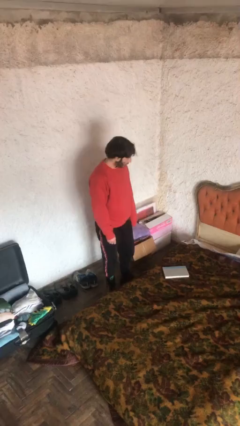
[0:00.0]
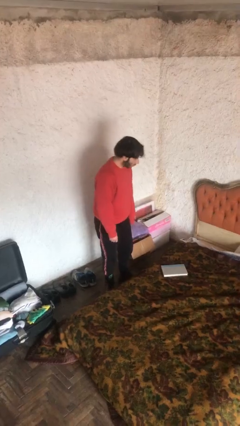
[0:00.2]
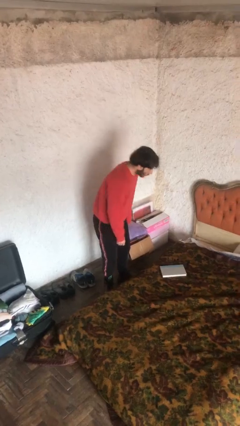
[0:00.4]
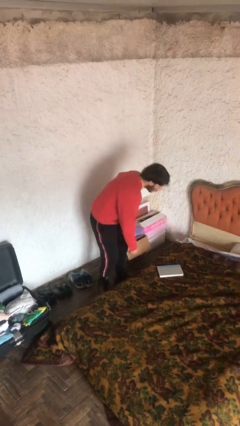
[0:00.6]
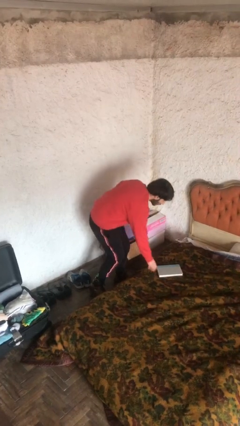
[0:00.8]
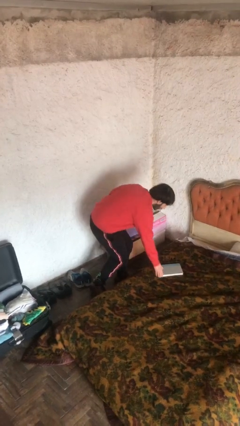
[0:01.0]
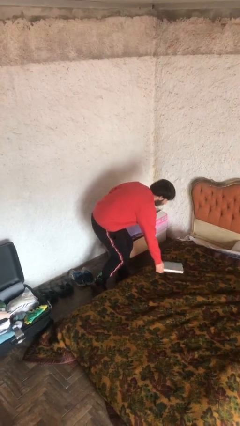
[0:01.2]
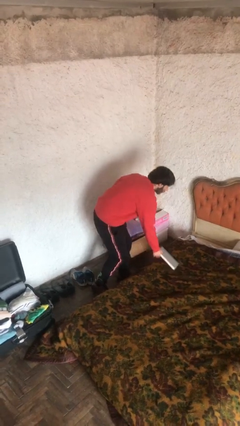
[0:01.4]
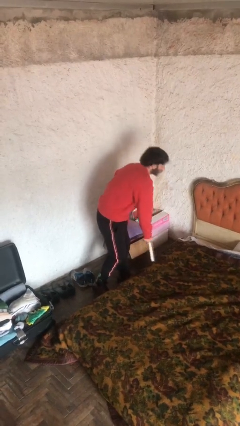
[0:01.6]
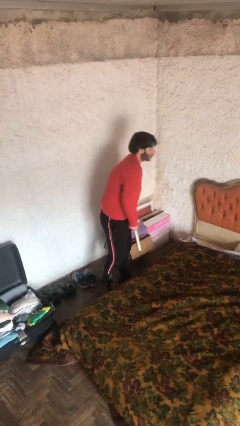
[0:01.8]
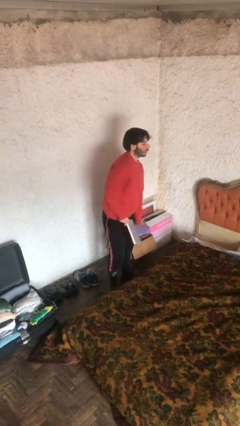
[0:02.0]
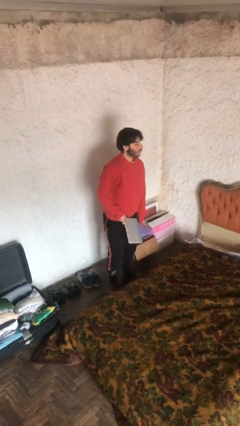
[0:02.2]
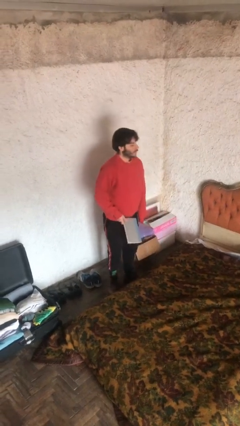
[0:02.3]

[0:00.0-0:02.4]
person picks up object from bed

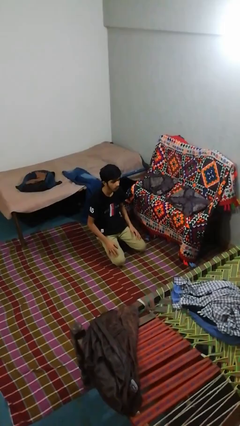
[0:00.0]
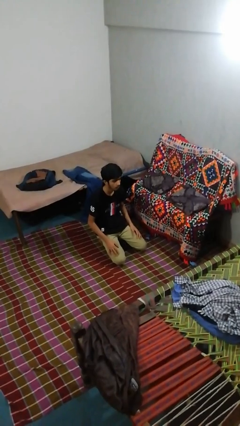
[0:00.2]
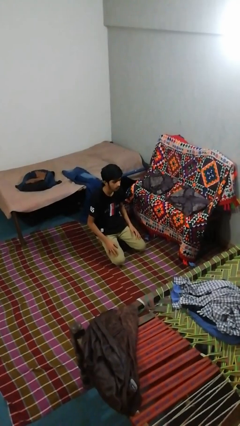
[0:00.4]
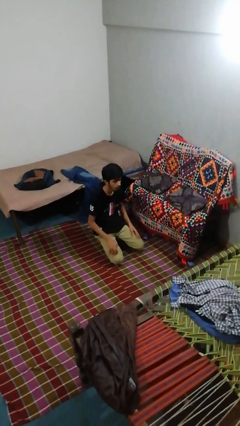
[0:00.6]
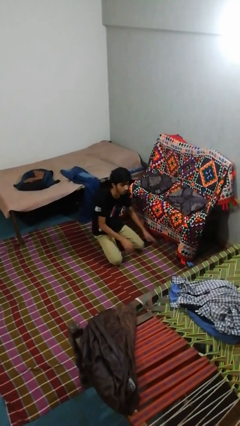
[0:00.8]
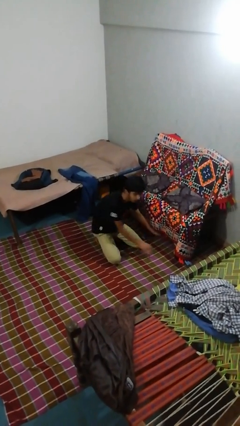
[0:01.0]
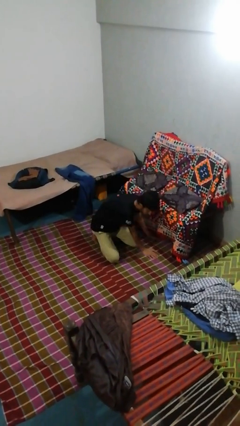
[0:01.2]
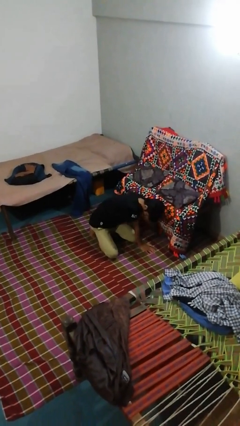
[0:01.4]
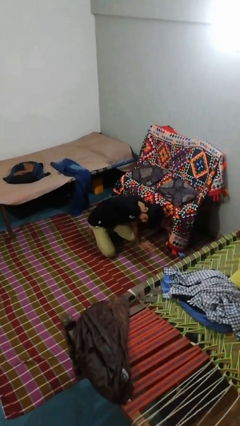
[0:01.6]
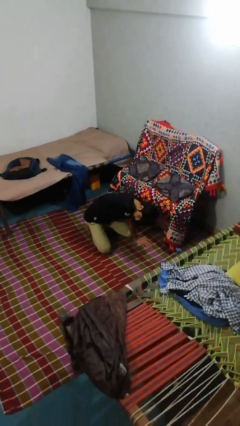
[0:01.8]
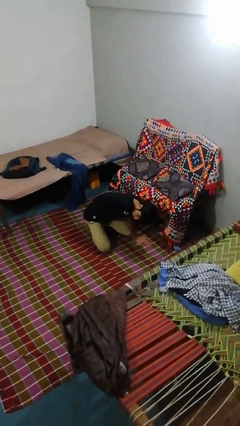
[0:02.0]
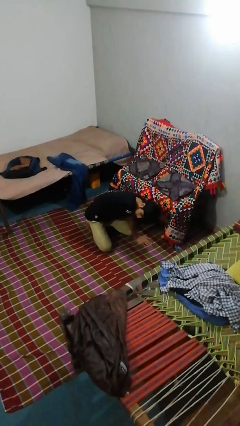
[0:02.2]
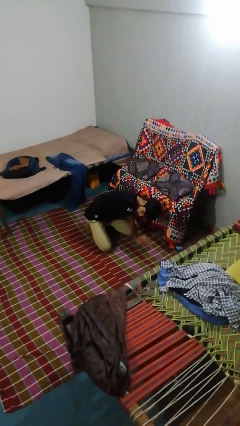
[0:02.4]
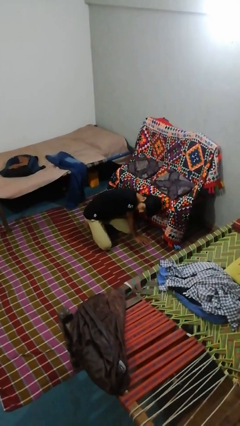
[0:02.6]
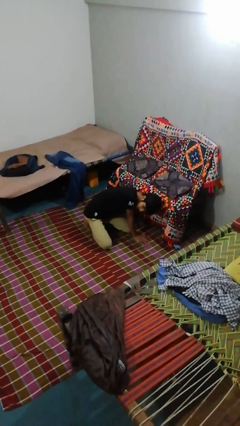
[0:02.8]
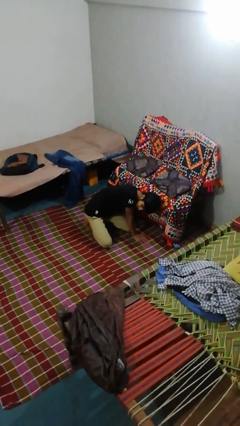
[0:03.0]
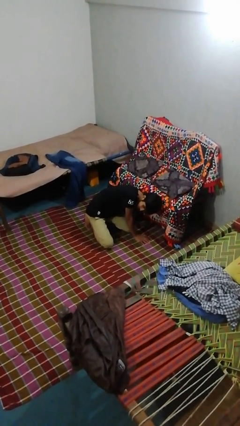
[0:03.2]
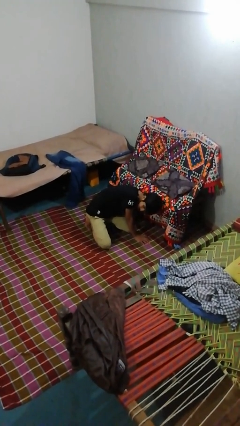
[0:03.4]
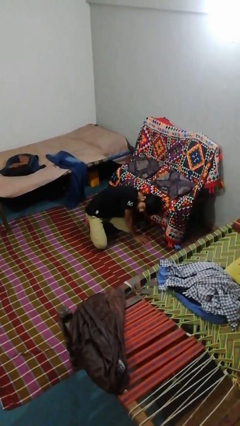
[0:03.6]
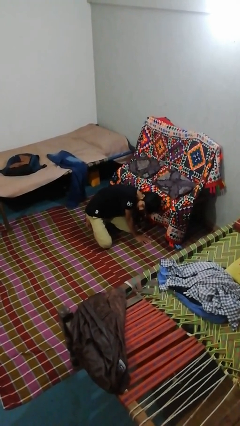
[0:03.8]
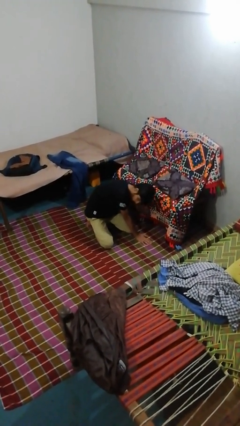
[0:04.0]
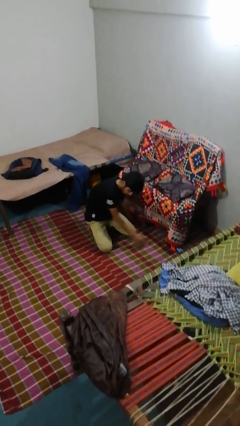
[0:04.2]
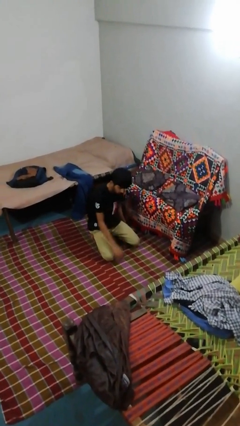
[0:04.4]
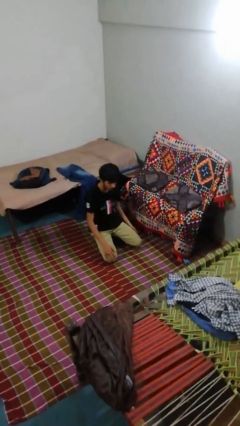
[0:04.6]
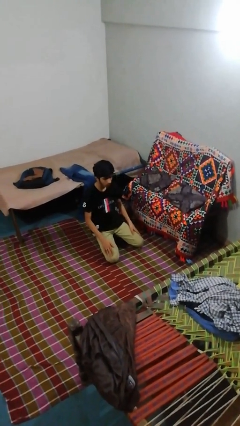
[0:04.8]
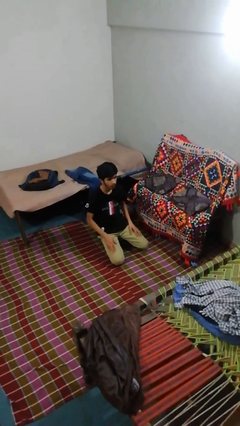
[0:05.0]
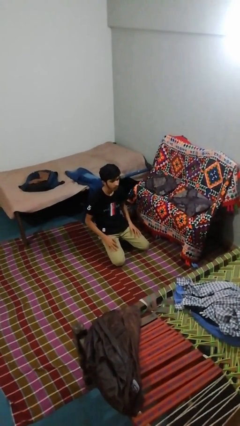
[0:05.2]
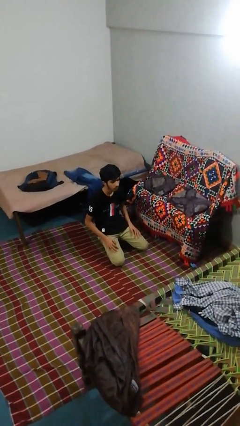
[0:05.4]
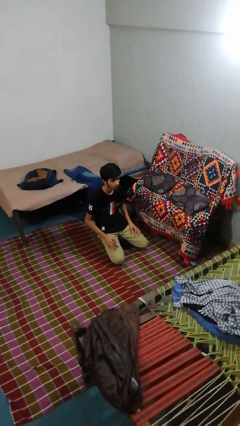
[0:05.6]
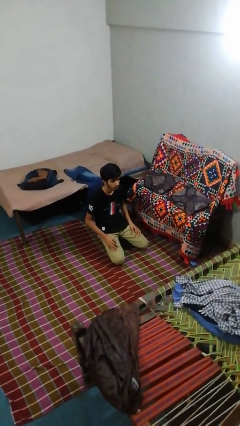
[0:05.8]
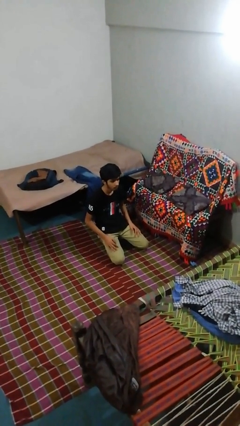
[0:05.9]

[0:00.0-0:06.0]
person searches under couch

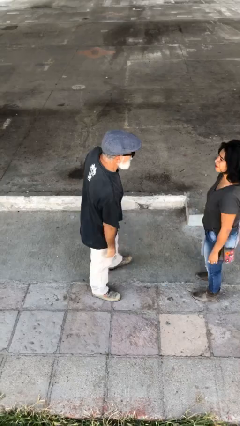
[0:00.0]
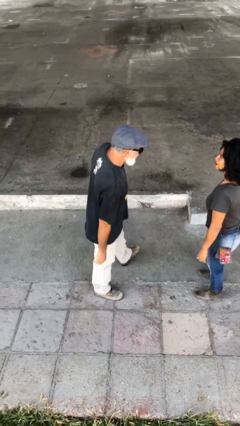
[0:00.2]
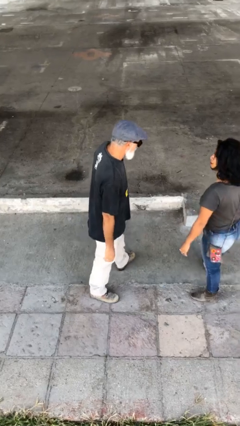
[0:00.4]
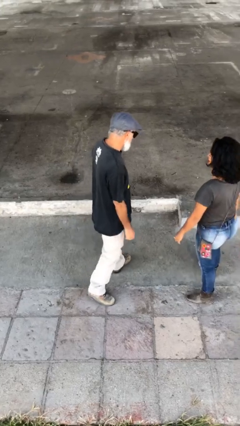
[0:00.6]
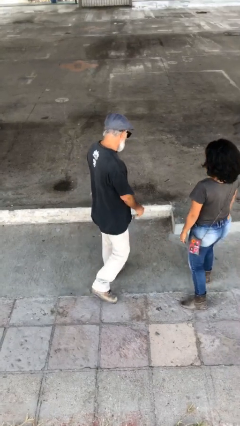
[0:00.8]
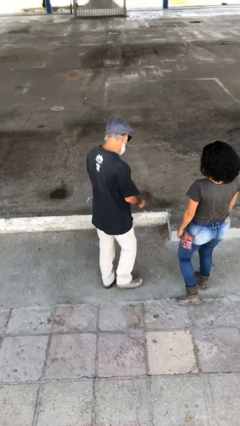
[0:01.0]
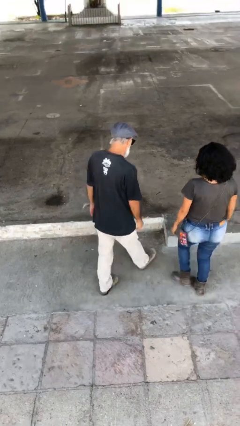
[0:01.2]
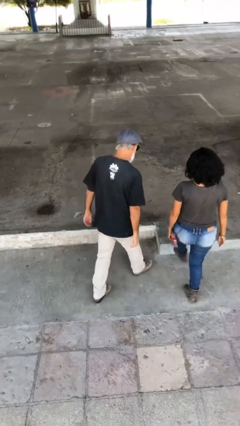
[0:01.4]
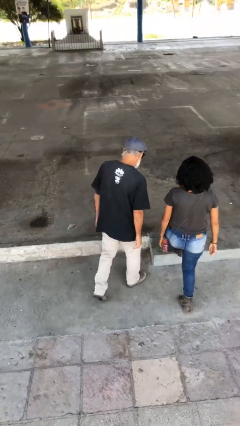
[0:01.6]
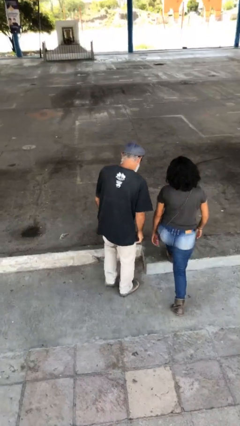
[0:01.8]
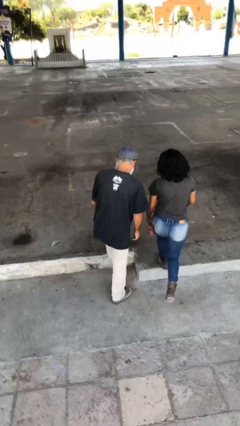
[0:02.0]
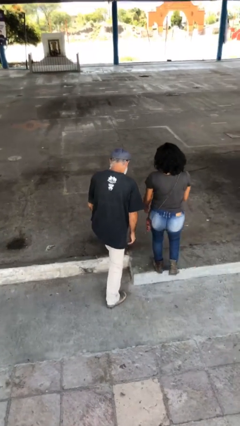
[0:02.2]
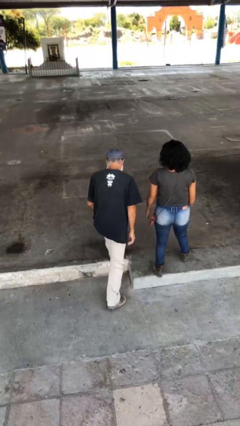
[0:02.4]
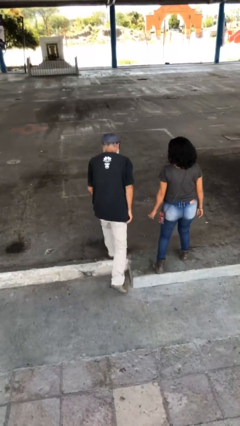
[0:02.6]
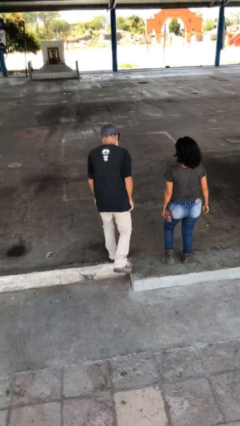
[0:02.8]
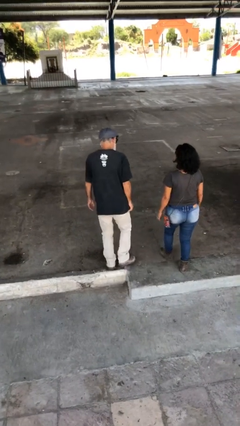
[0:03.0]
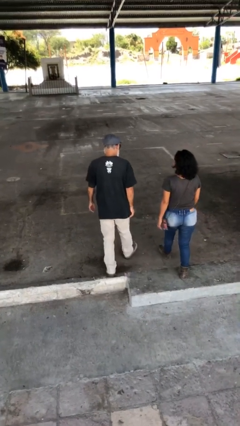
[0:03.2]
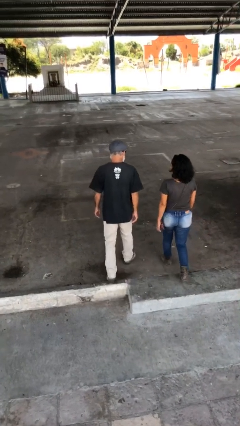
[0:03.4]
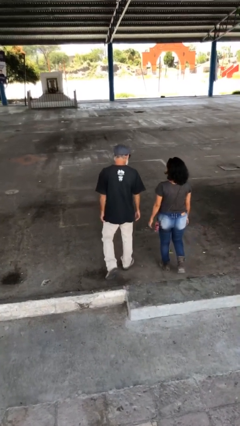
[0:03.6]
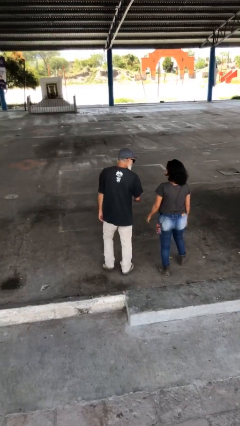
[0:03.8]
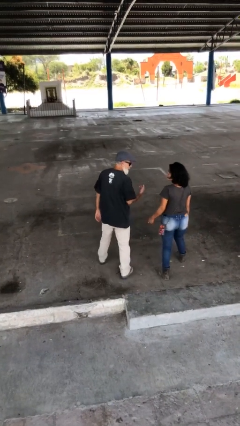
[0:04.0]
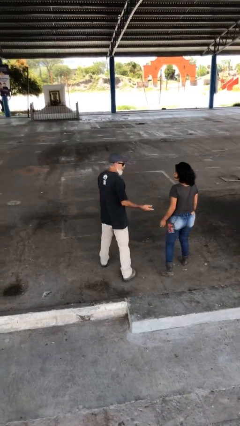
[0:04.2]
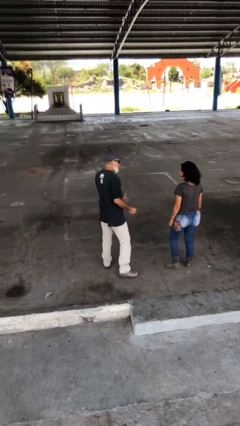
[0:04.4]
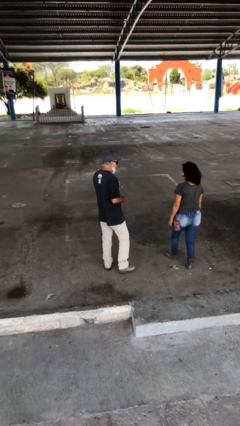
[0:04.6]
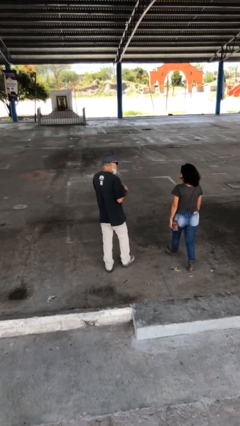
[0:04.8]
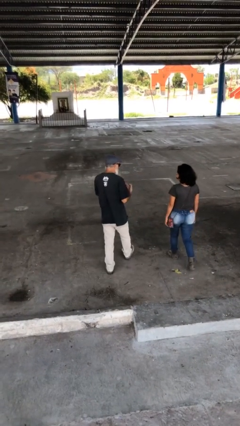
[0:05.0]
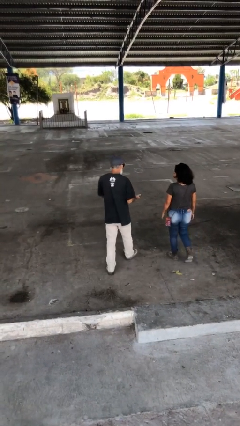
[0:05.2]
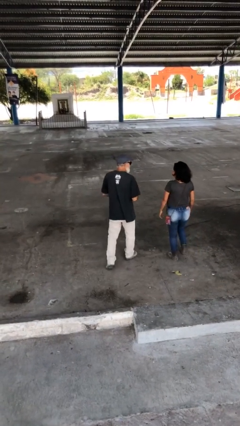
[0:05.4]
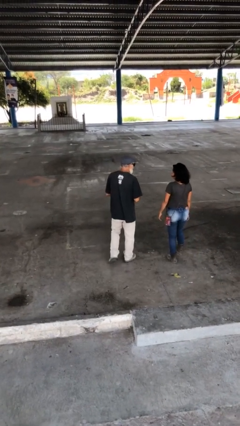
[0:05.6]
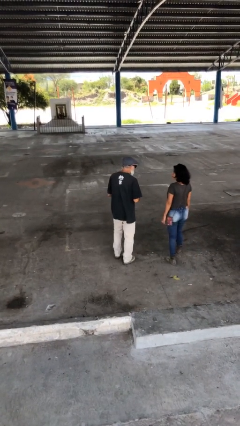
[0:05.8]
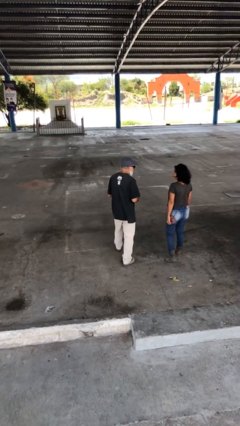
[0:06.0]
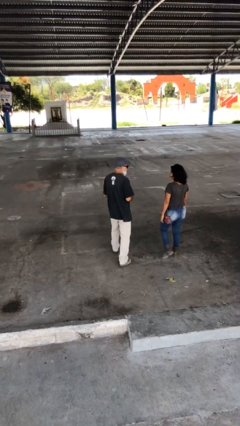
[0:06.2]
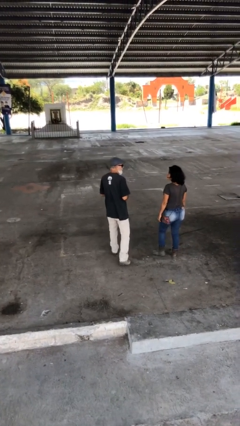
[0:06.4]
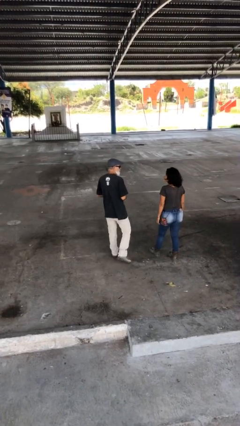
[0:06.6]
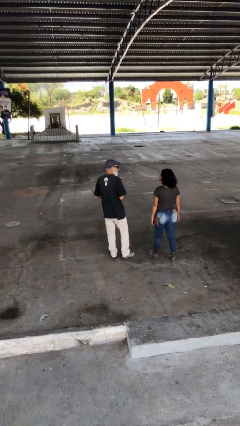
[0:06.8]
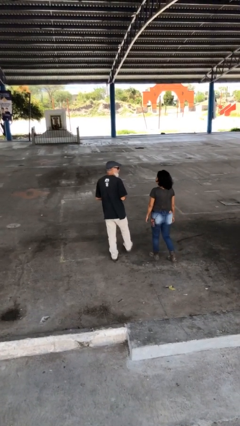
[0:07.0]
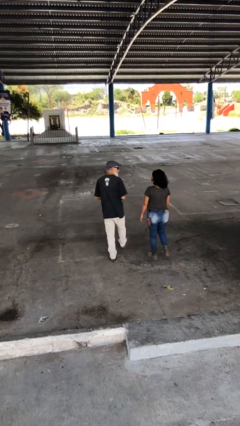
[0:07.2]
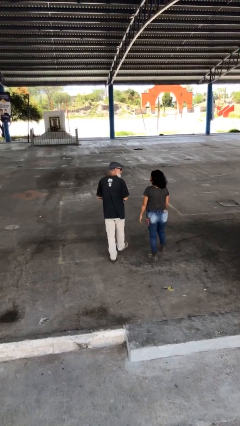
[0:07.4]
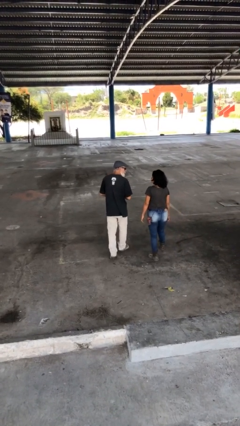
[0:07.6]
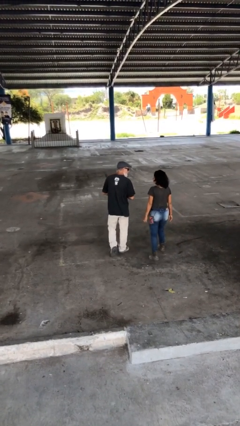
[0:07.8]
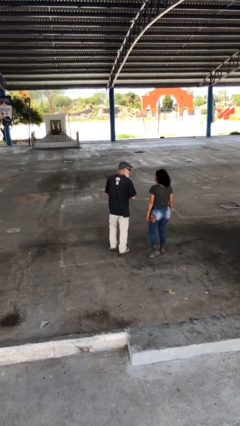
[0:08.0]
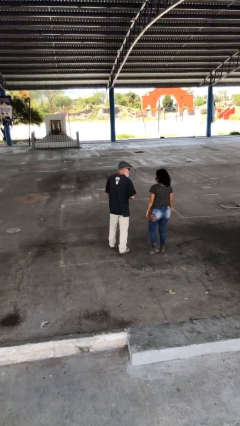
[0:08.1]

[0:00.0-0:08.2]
person talks to person

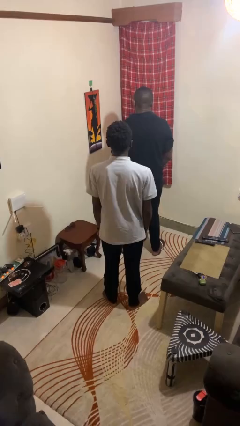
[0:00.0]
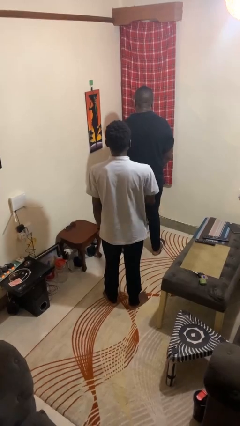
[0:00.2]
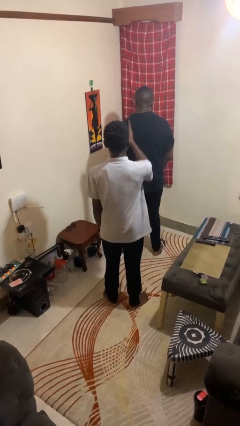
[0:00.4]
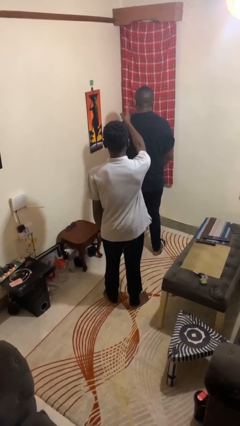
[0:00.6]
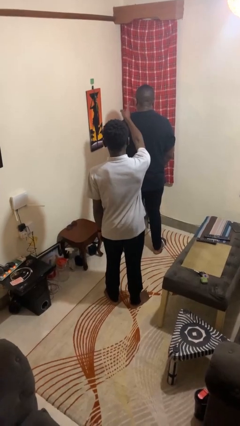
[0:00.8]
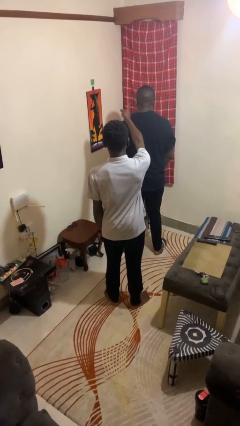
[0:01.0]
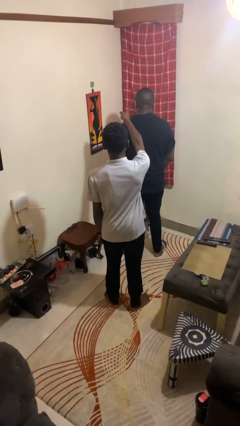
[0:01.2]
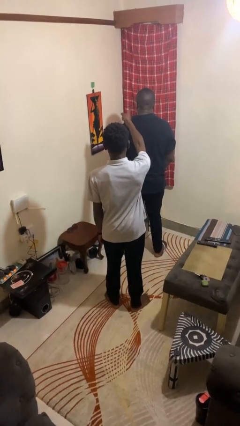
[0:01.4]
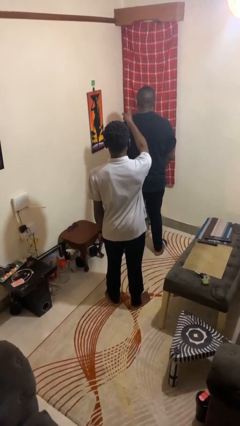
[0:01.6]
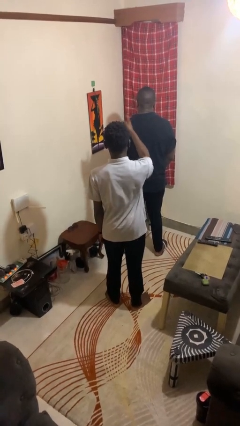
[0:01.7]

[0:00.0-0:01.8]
person points at person
